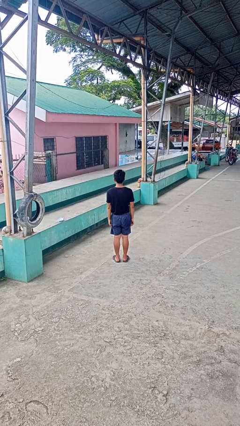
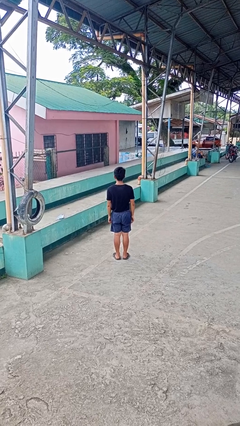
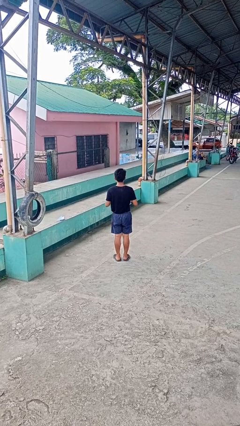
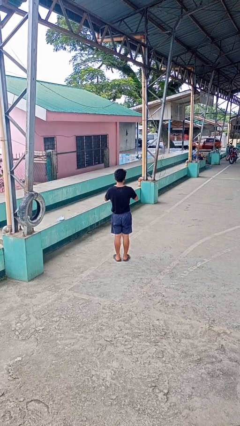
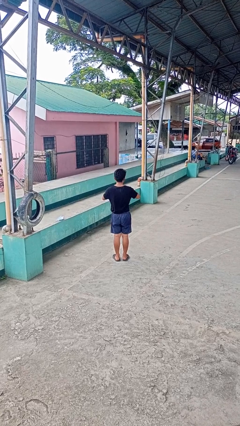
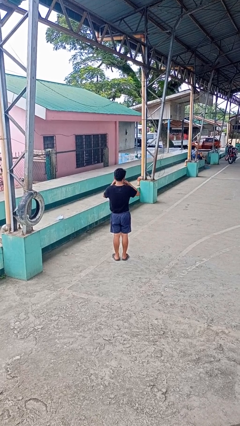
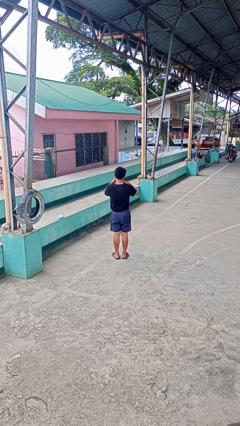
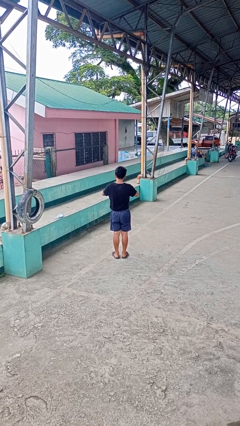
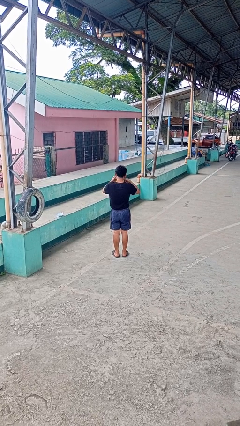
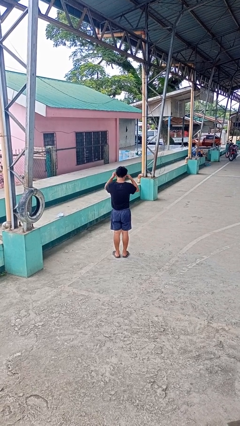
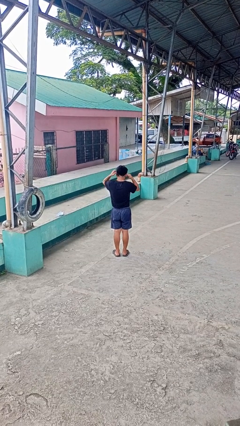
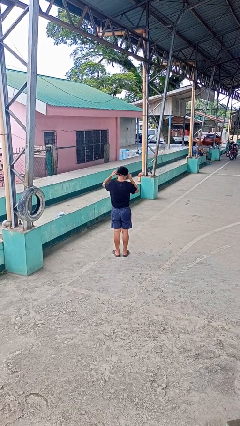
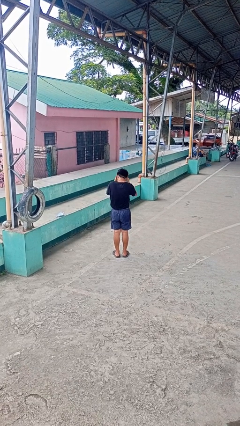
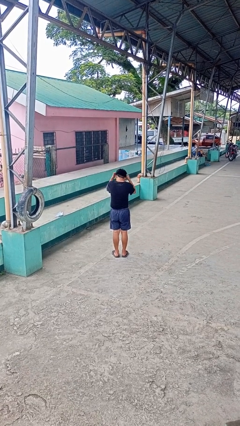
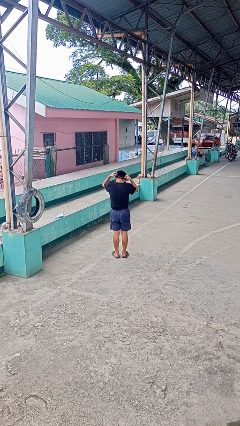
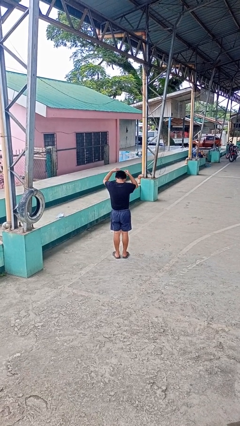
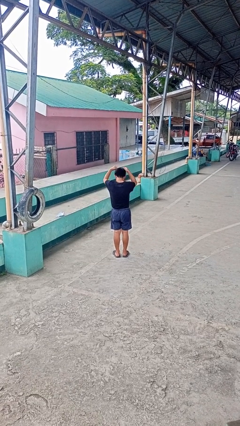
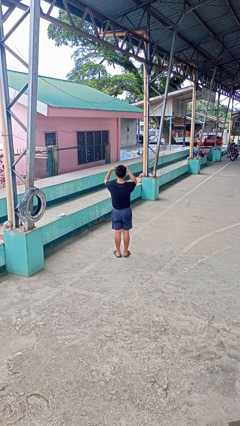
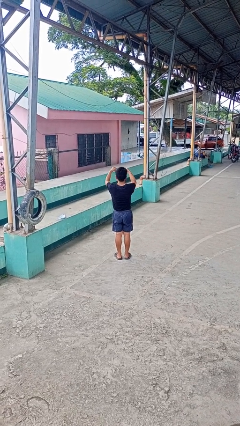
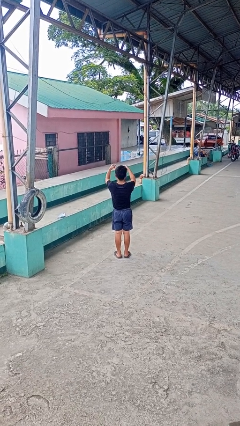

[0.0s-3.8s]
person takes off necklace

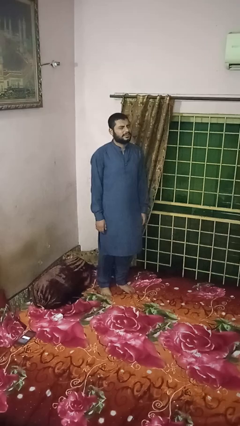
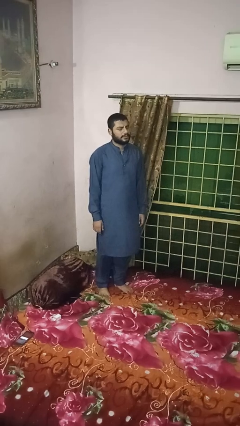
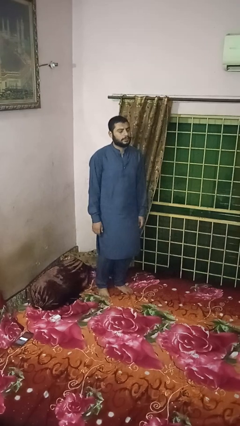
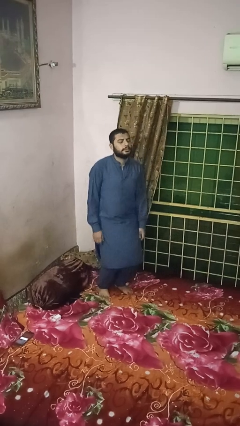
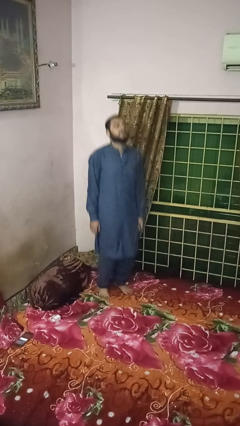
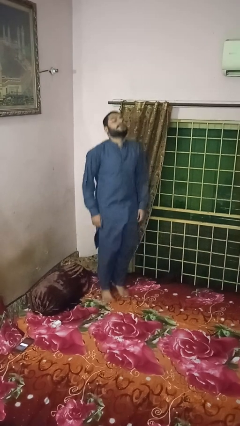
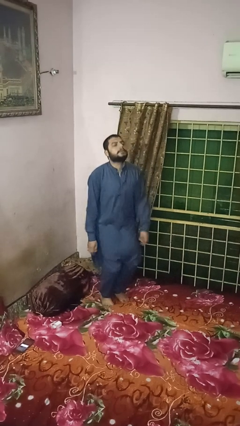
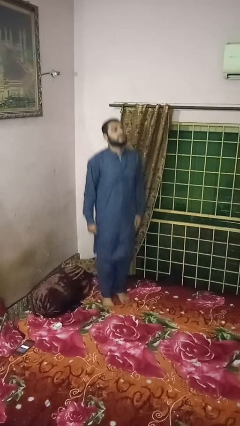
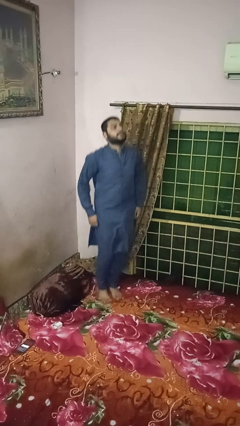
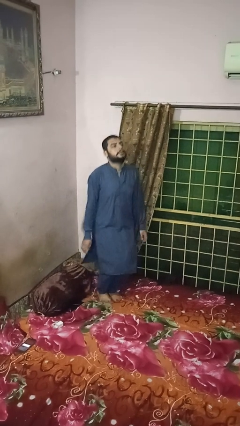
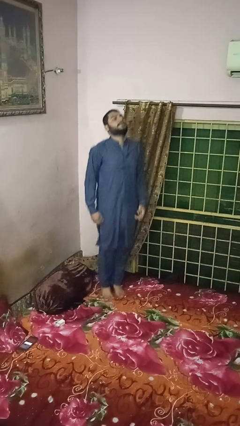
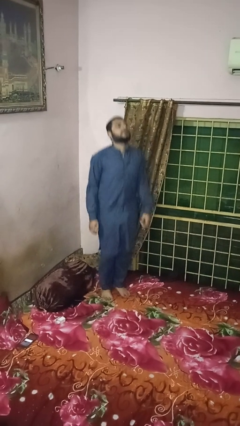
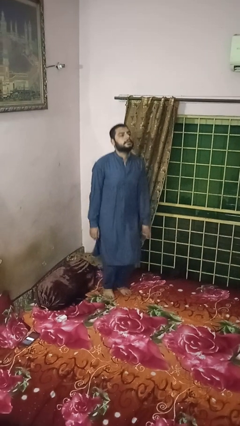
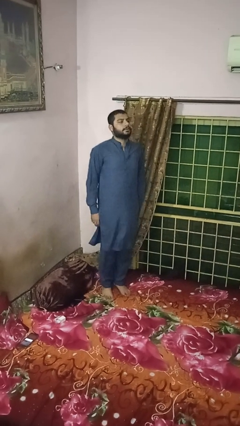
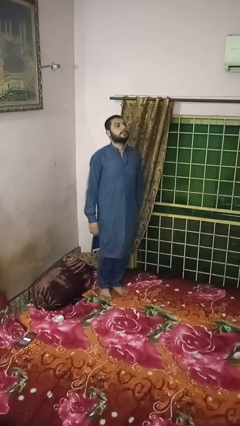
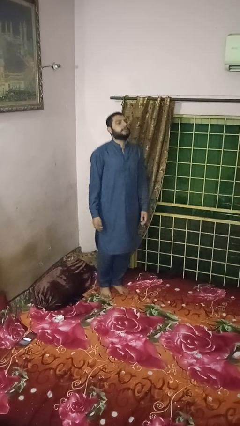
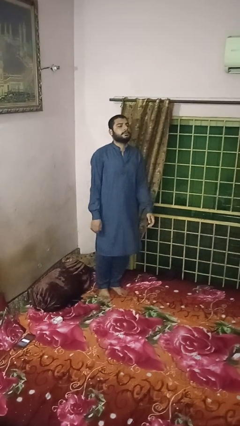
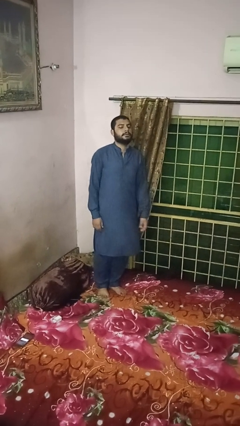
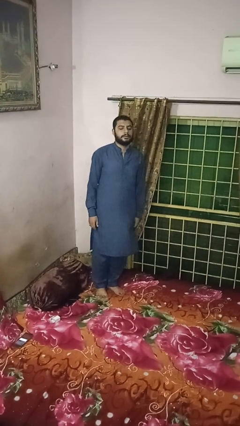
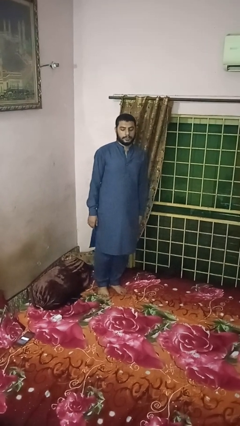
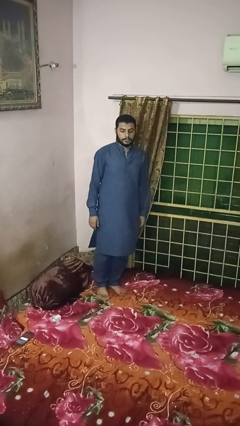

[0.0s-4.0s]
person jumps on bed

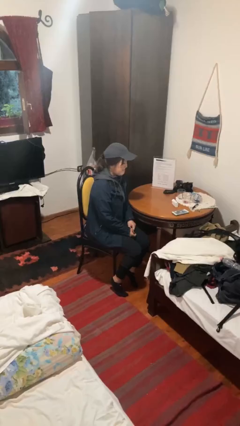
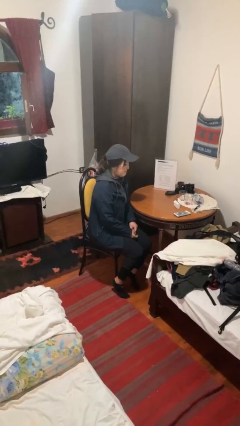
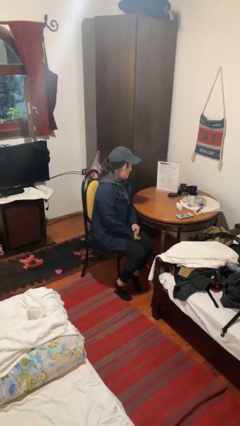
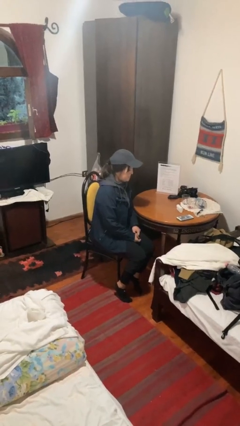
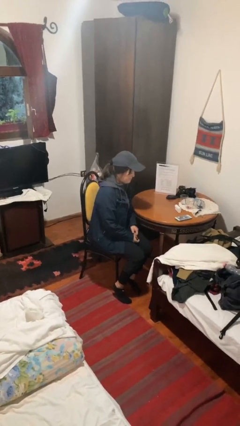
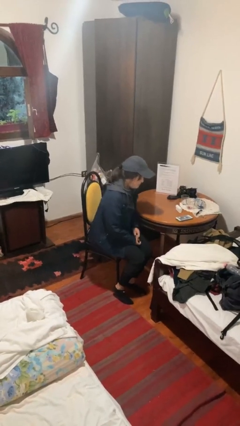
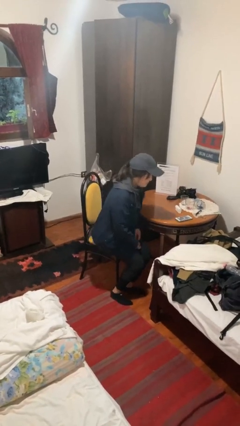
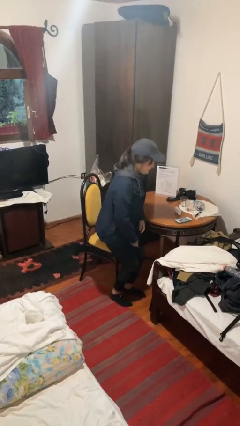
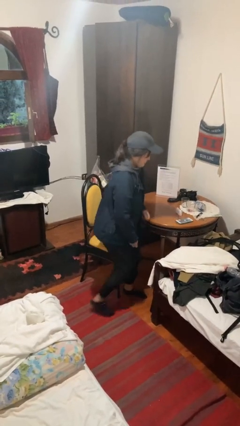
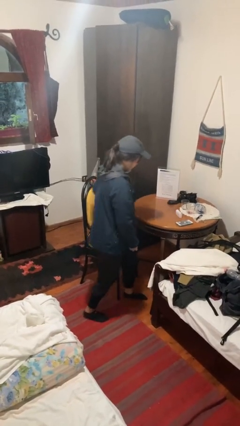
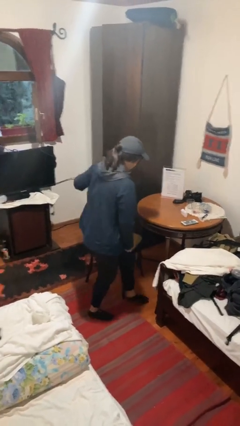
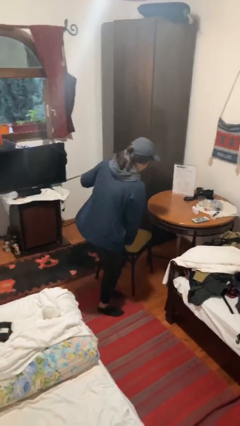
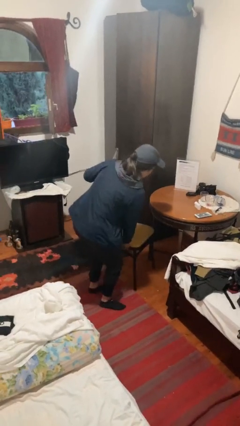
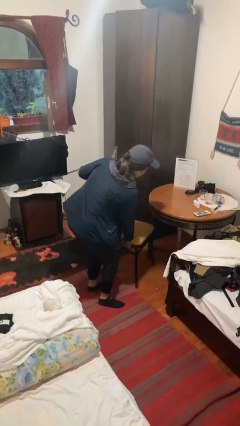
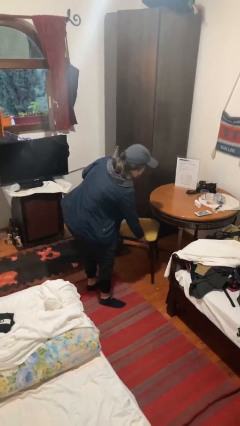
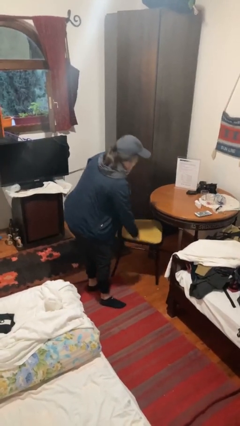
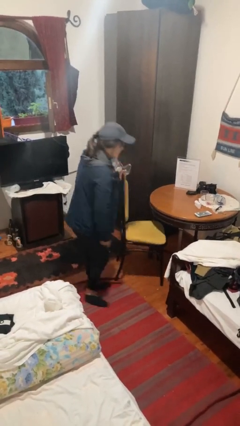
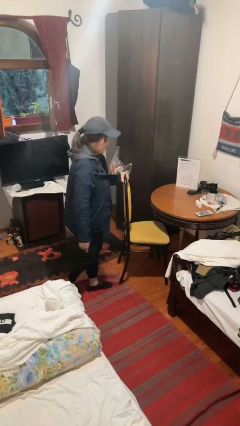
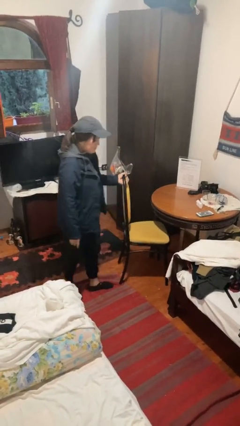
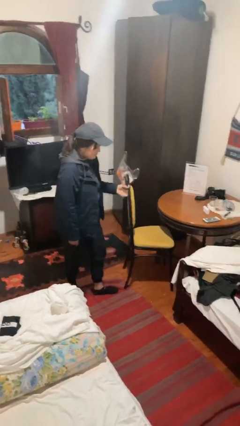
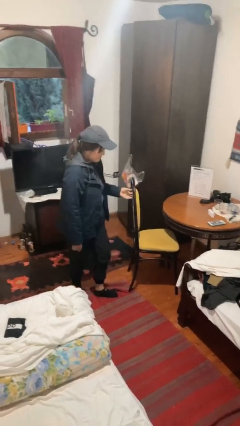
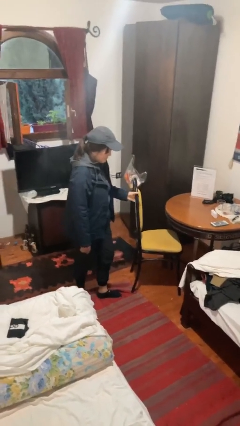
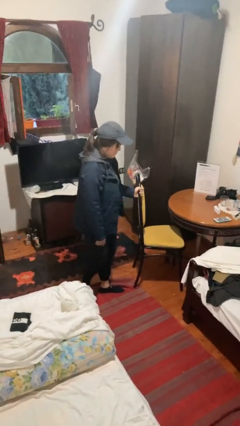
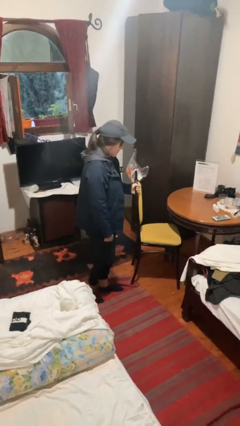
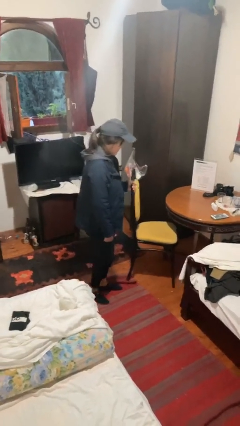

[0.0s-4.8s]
person stands up

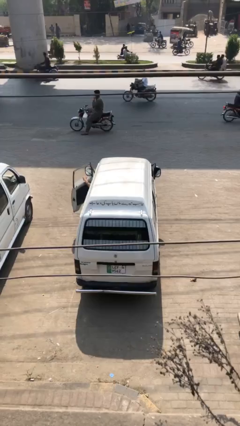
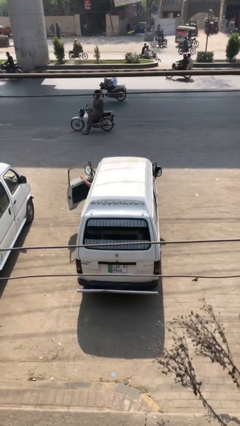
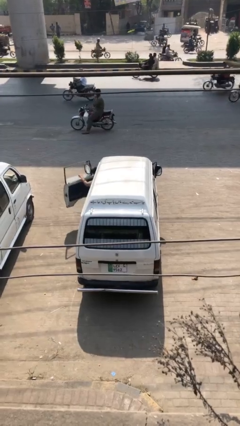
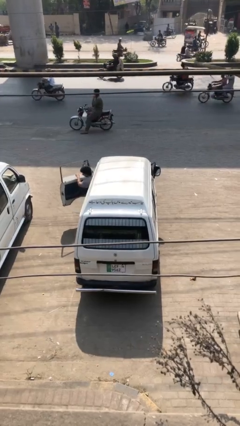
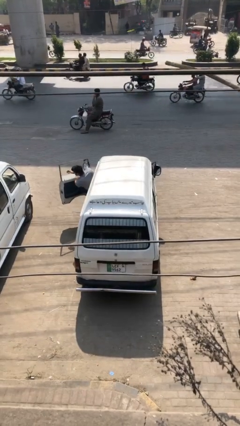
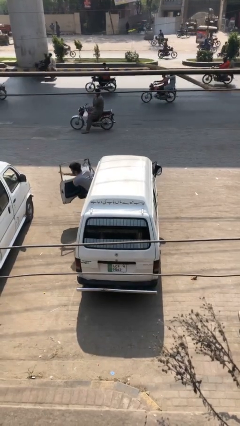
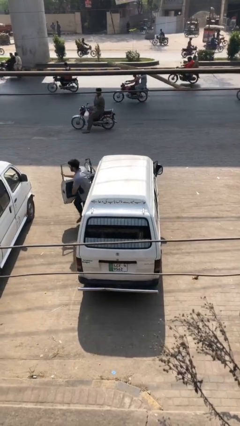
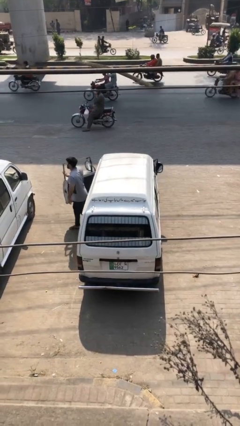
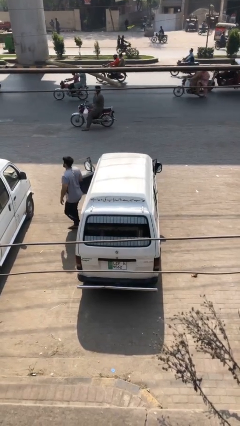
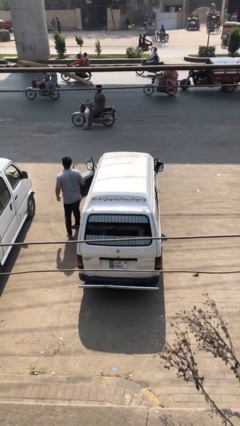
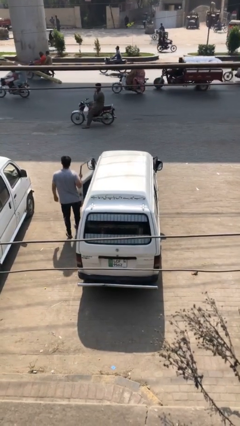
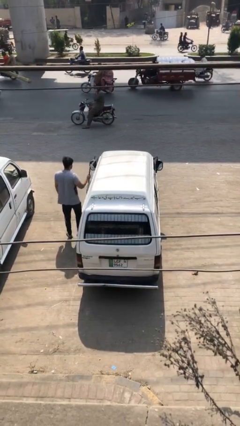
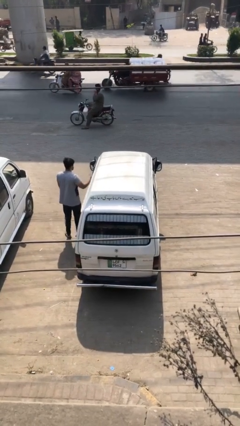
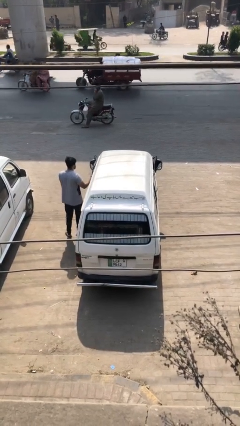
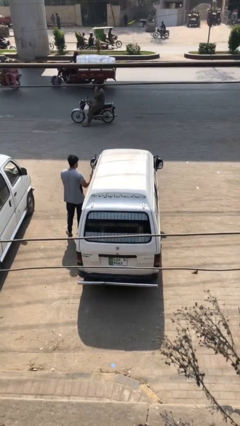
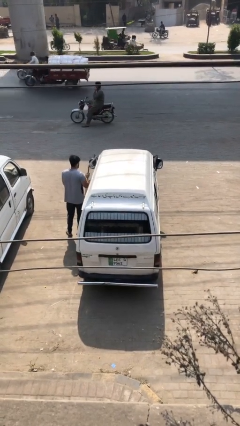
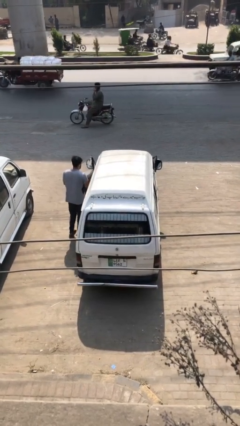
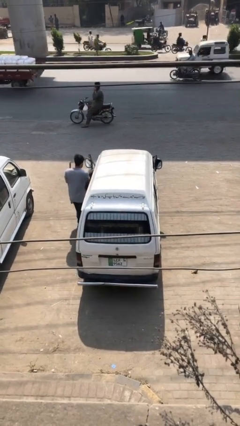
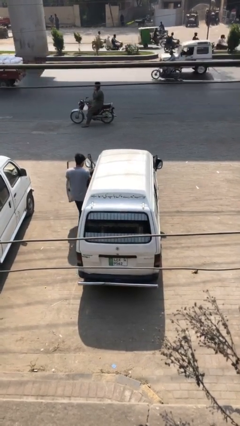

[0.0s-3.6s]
car drops off person

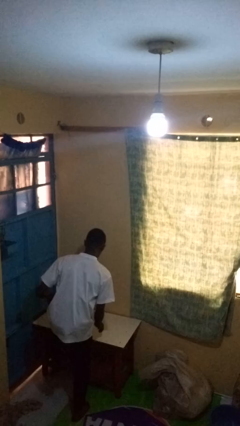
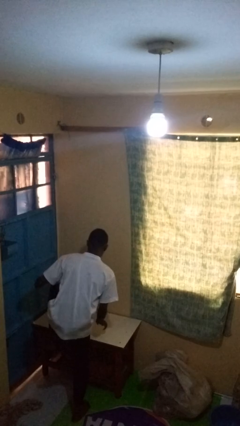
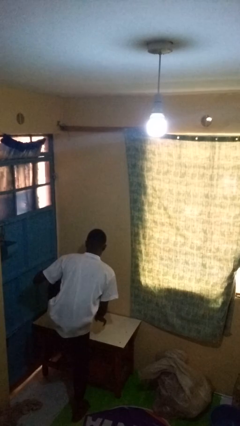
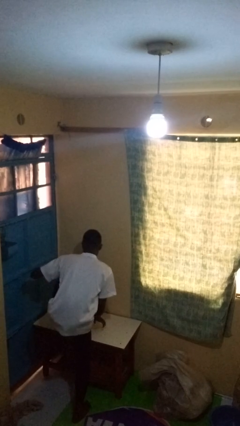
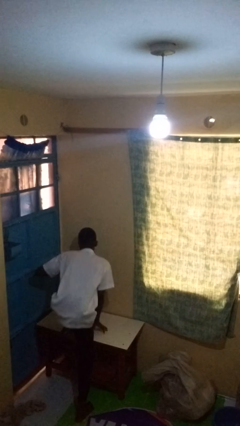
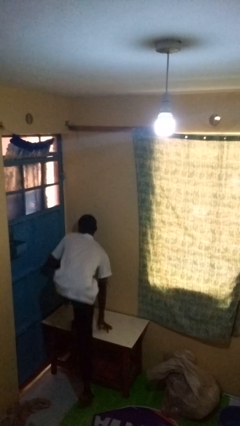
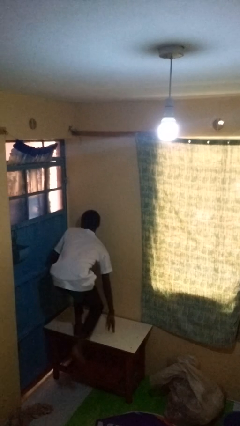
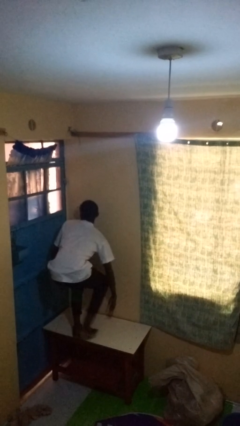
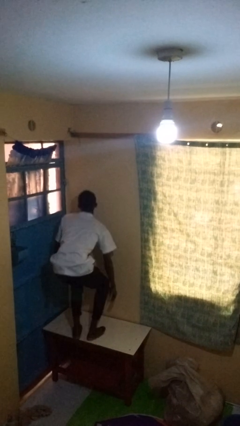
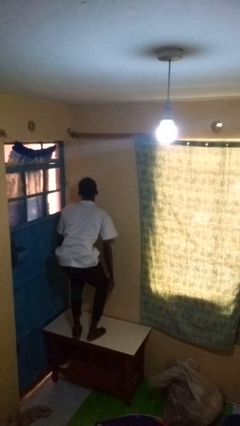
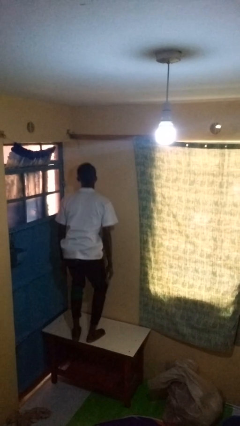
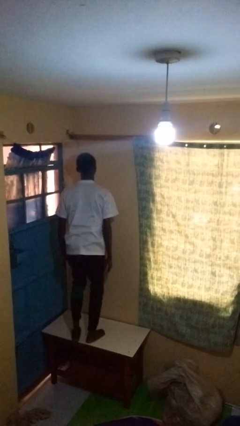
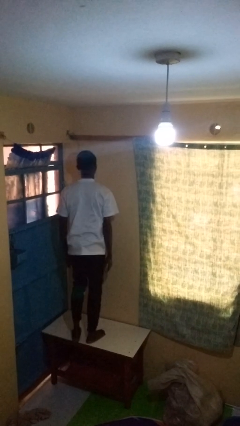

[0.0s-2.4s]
person climbs on table
